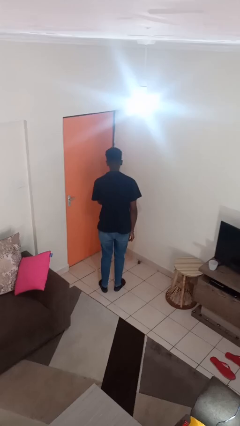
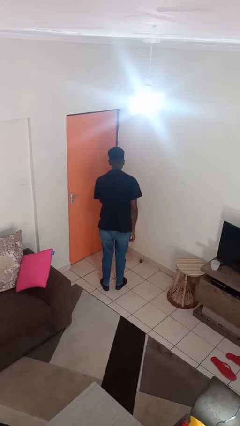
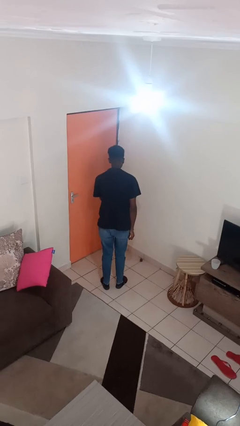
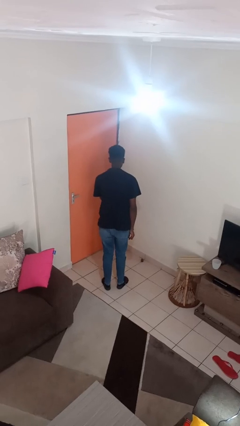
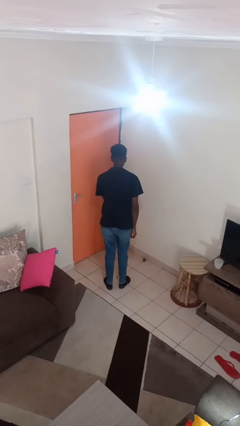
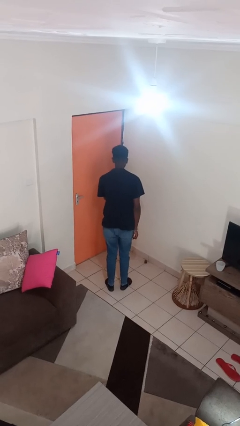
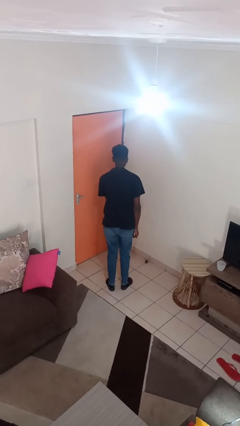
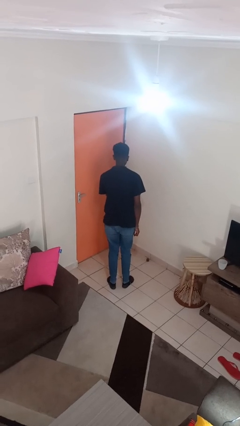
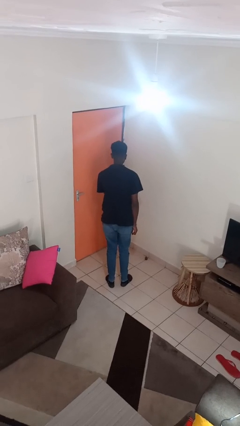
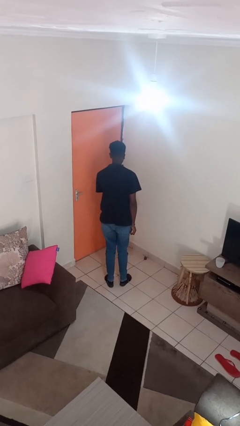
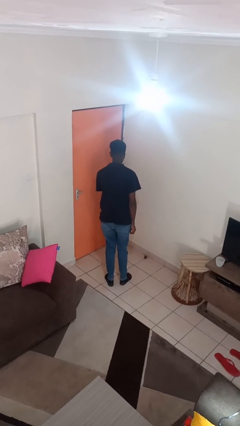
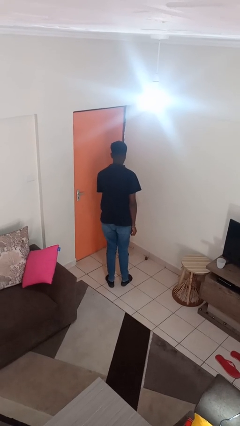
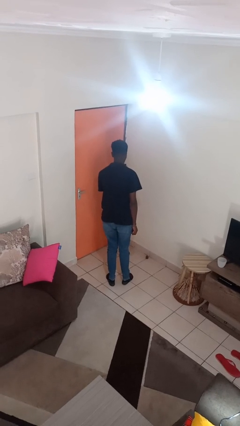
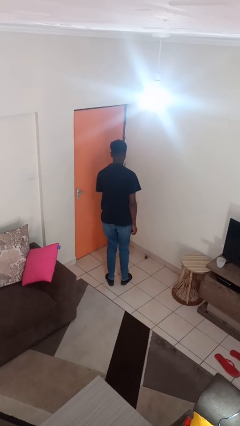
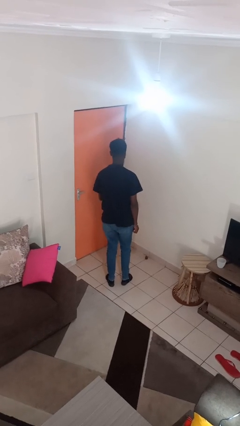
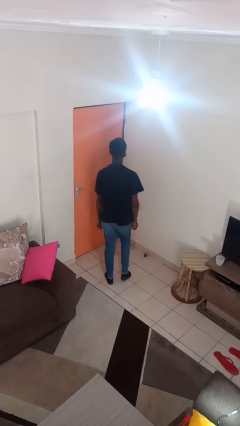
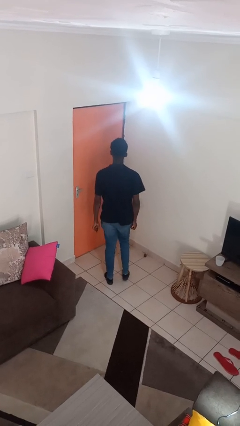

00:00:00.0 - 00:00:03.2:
person gestures be quiet

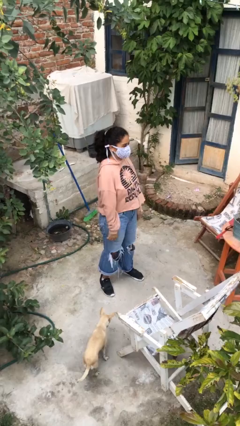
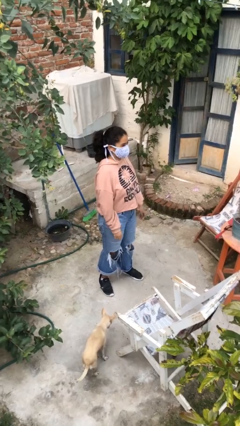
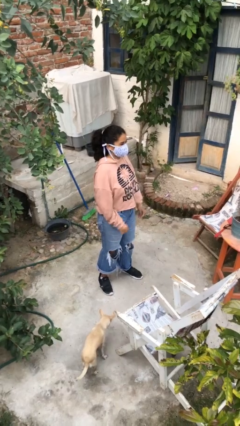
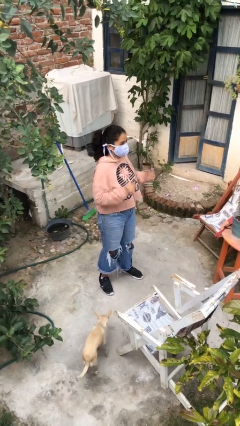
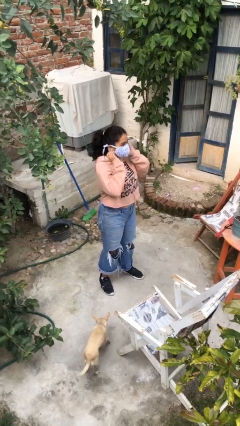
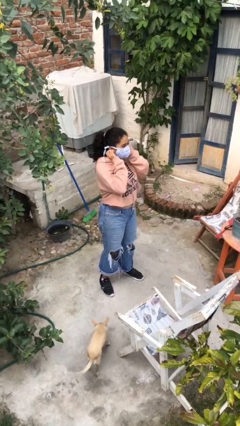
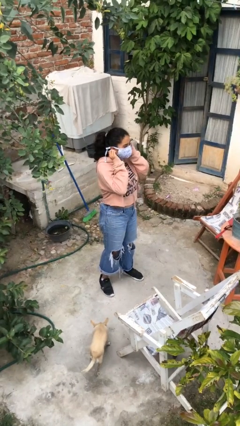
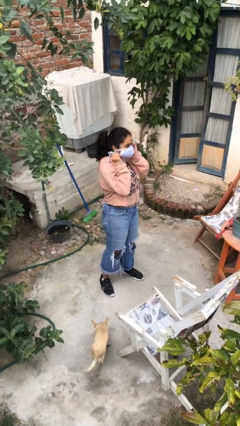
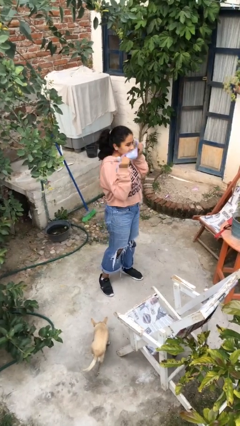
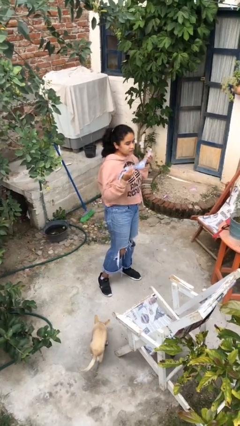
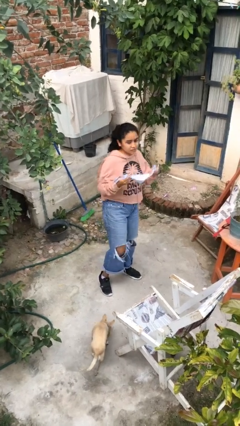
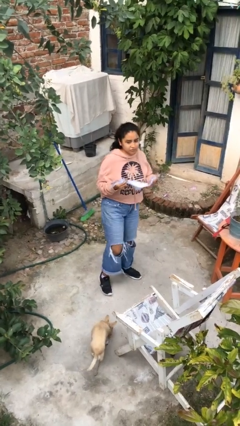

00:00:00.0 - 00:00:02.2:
person takes off facemask

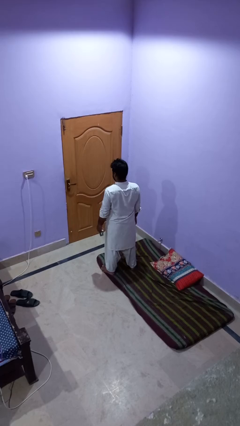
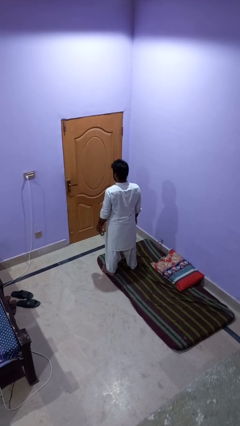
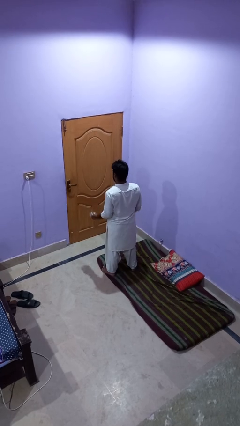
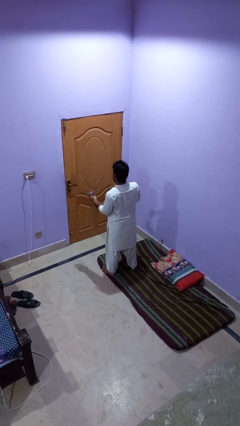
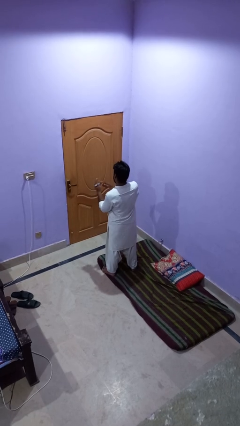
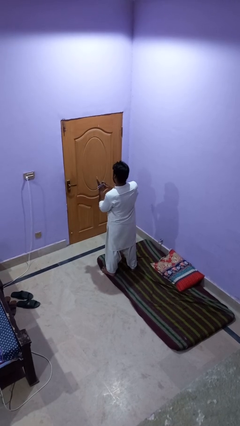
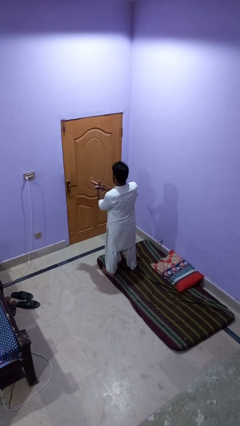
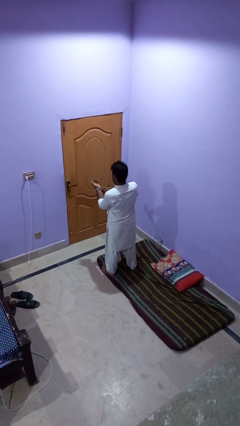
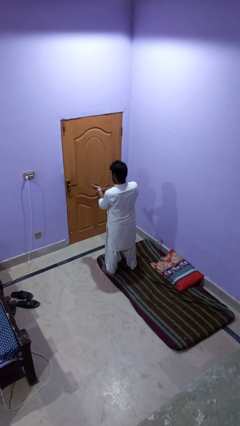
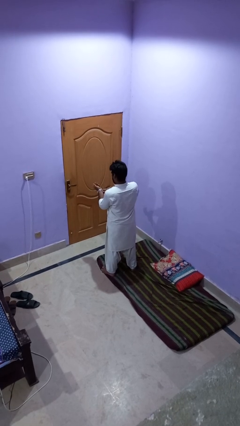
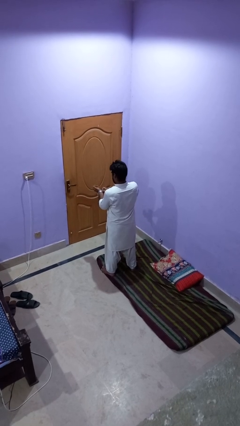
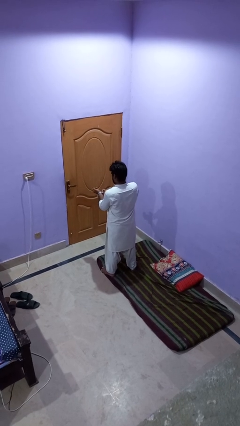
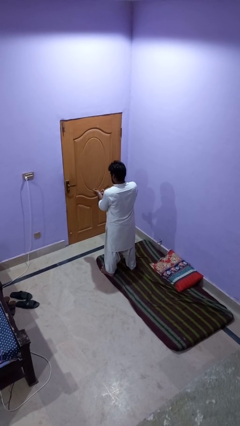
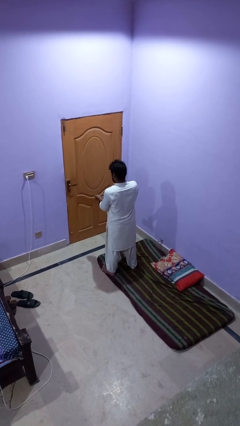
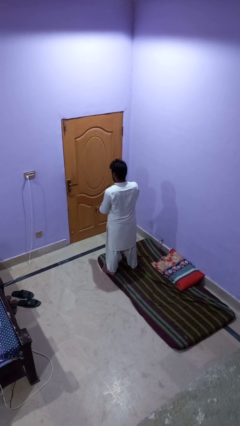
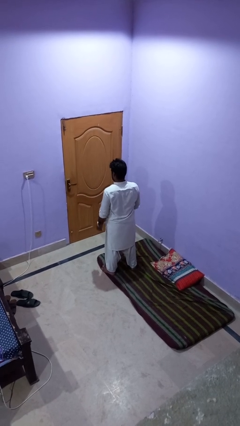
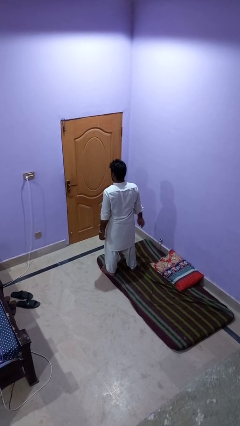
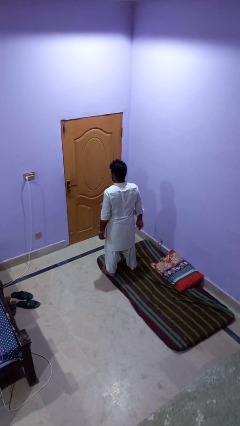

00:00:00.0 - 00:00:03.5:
person puts on wristwatch

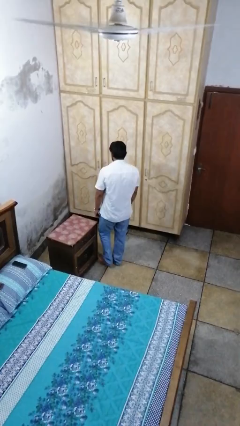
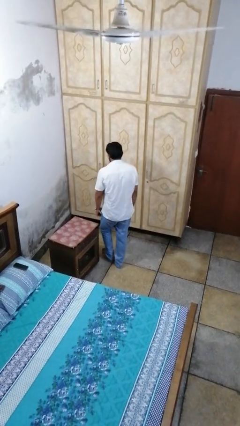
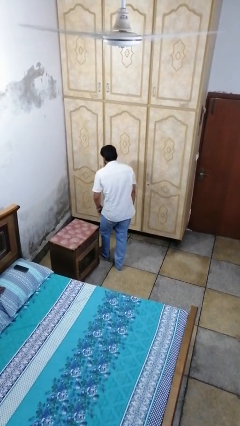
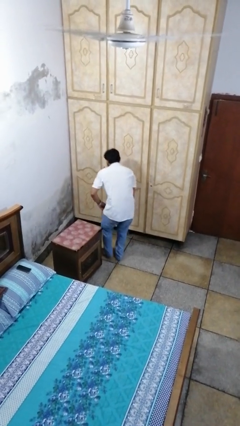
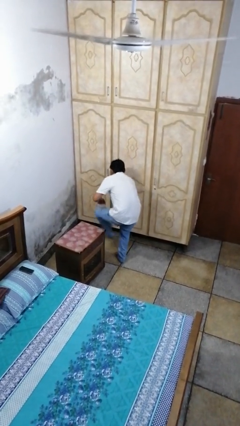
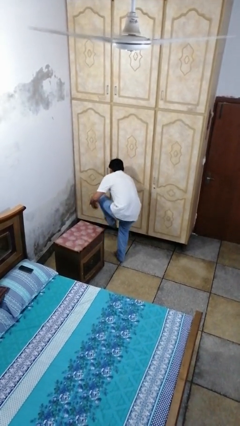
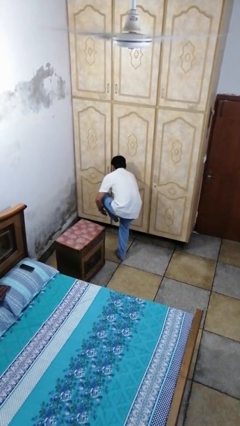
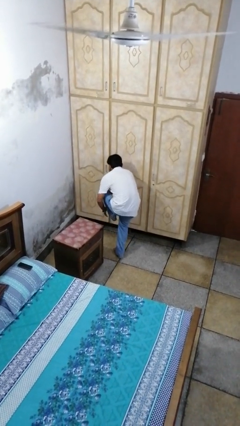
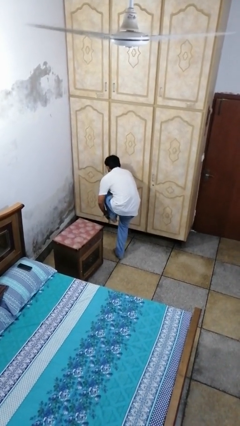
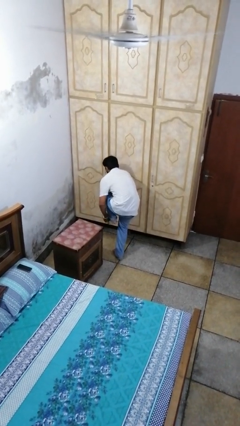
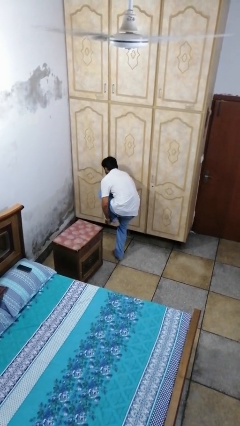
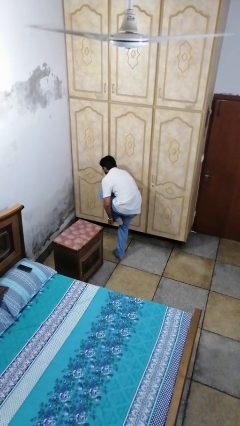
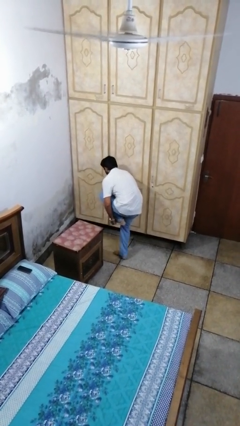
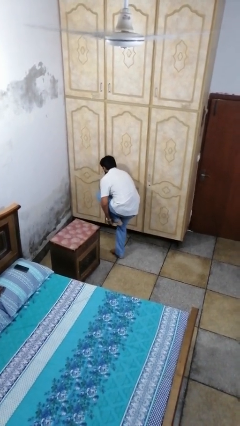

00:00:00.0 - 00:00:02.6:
person stubs toe

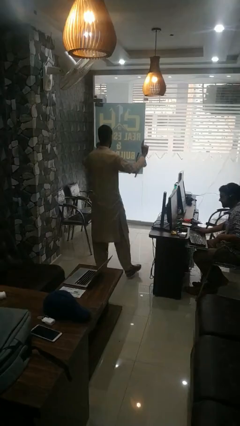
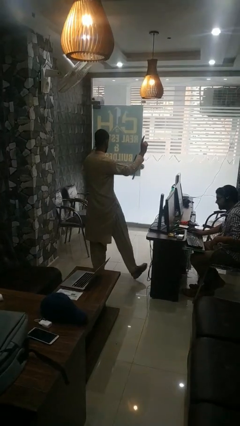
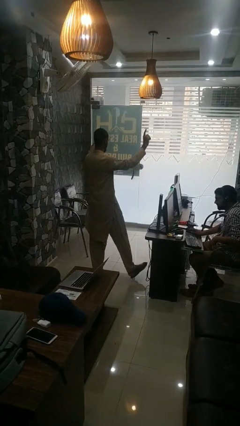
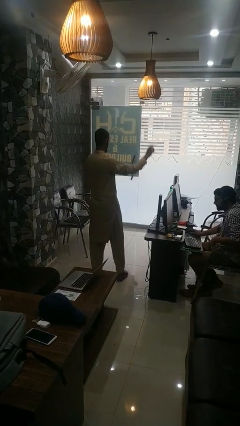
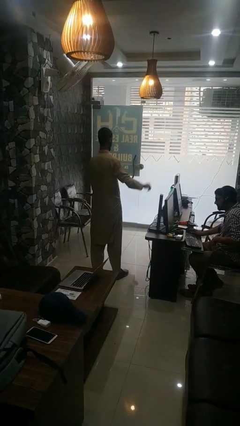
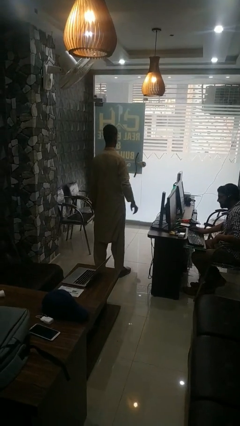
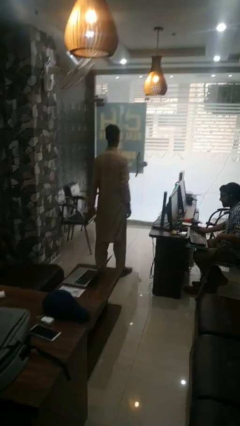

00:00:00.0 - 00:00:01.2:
person dances in place

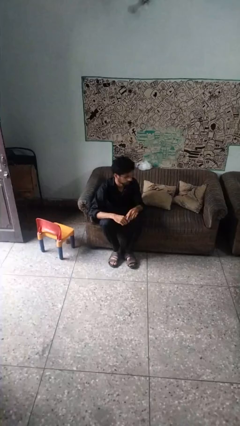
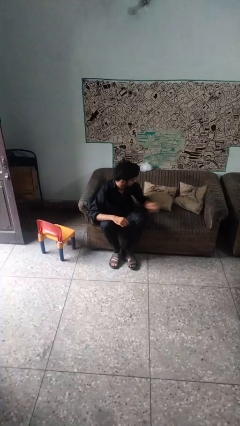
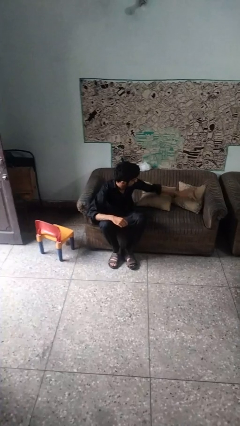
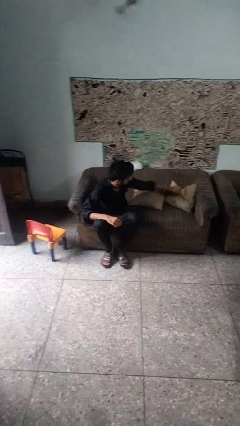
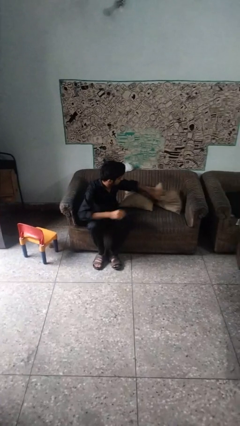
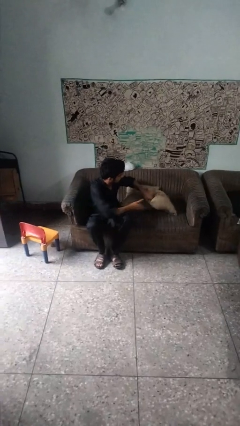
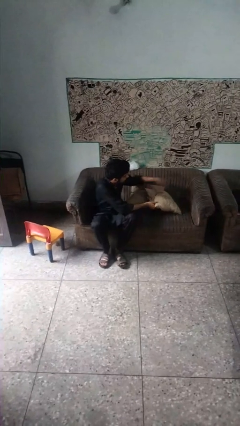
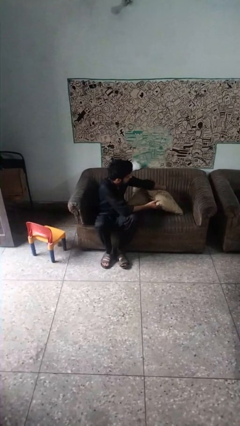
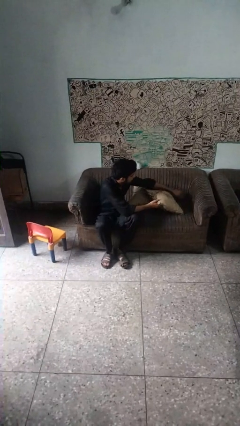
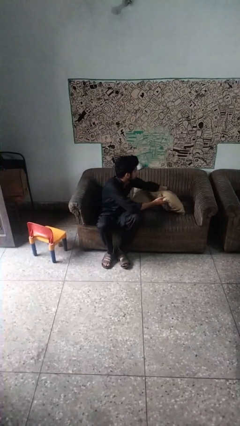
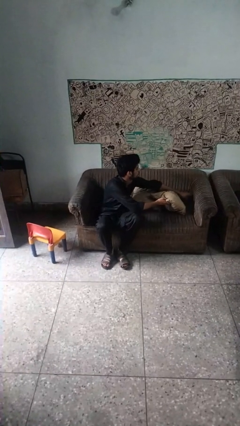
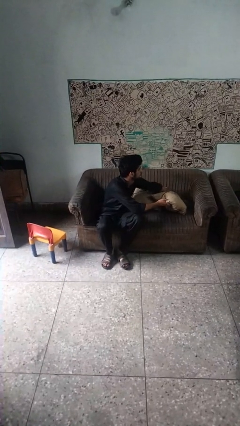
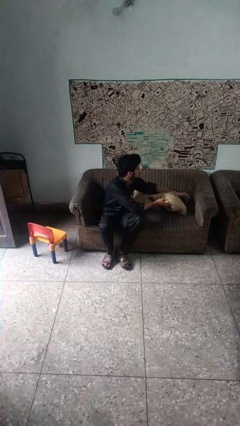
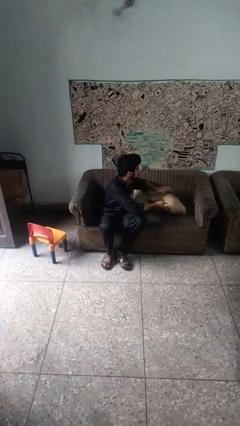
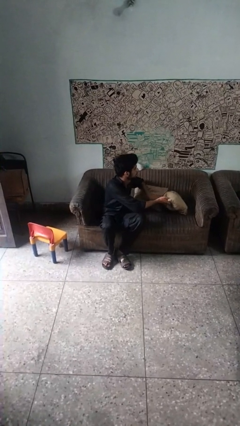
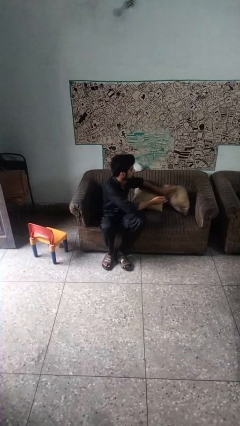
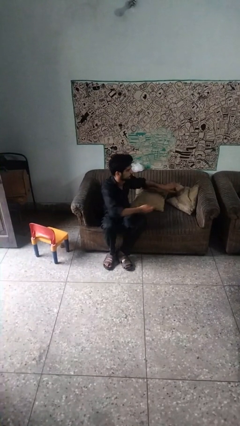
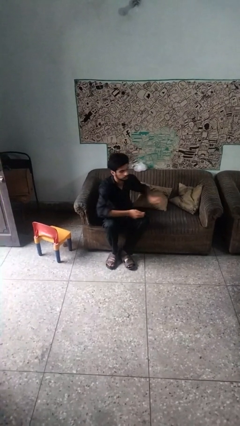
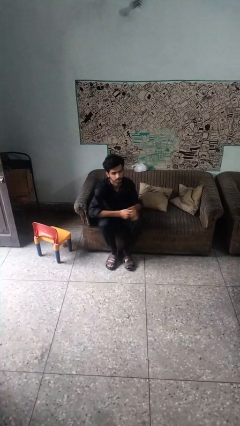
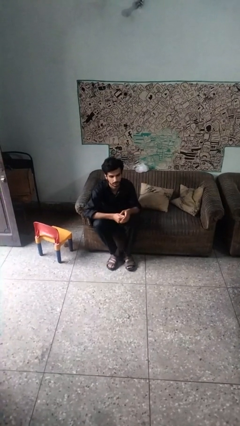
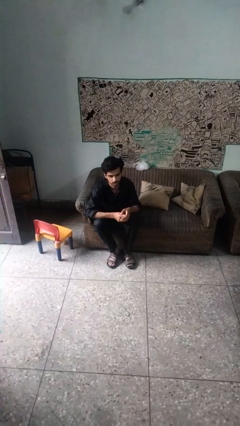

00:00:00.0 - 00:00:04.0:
person searches in couch

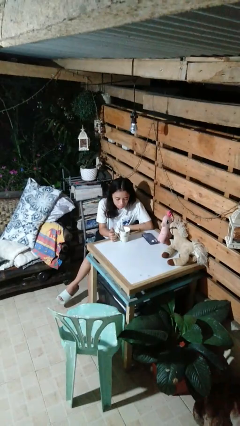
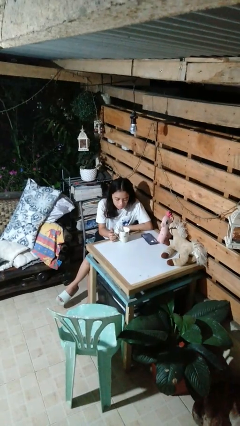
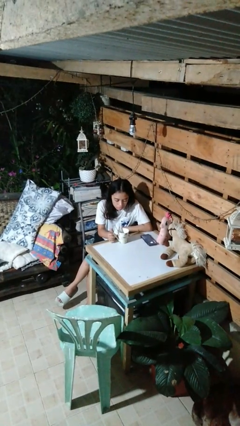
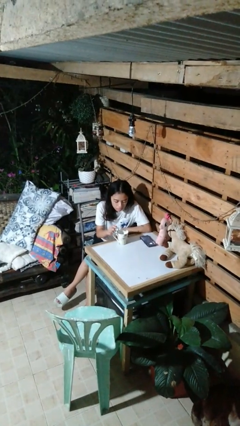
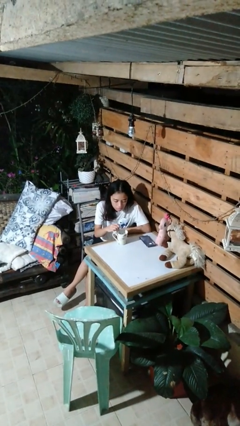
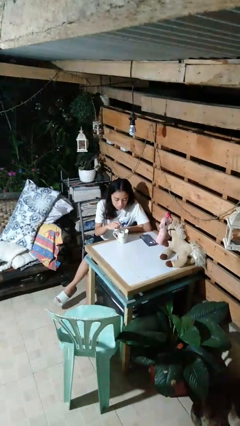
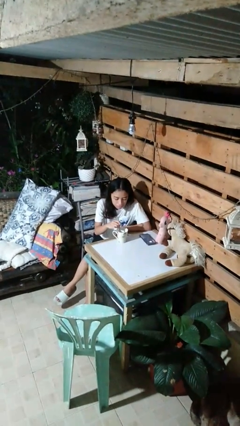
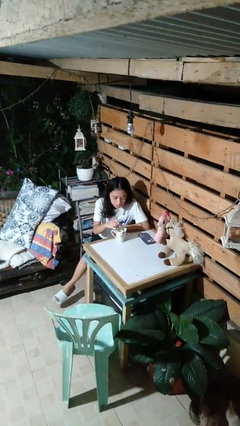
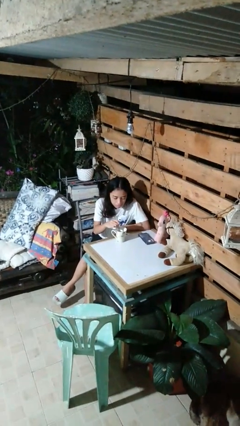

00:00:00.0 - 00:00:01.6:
person stirs mug
